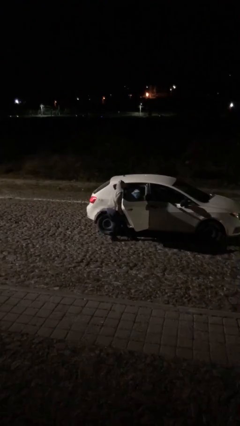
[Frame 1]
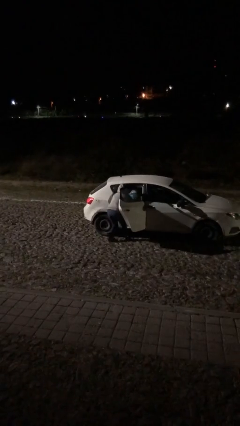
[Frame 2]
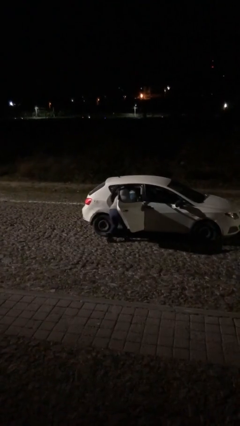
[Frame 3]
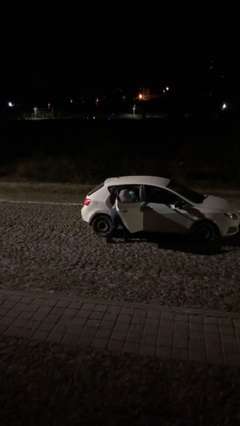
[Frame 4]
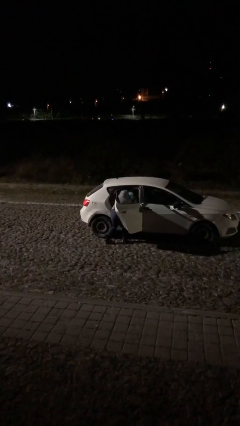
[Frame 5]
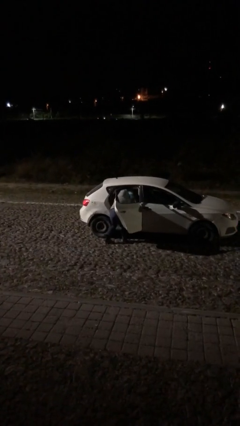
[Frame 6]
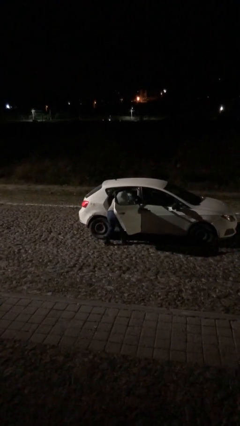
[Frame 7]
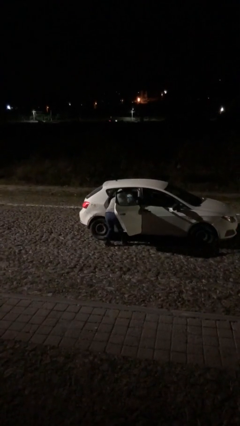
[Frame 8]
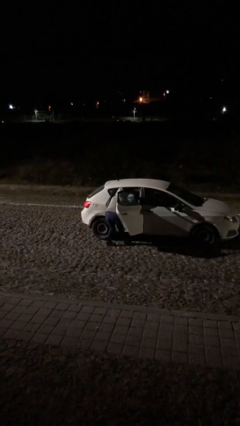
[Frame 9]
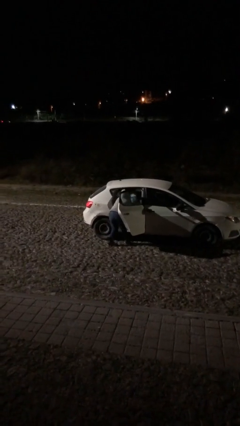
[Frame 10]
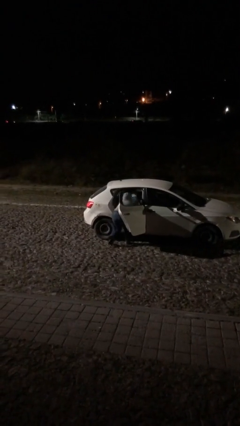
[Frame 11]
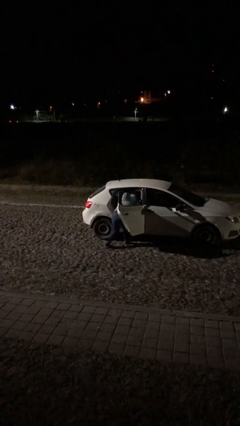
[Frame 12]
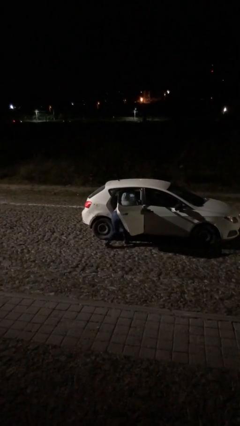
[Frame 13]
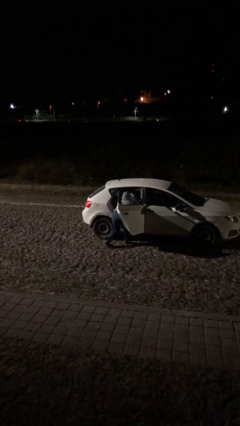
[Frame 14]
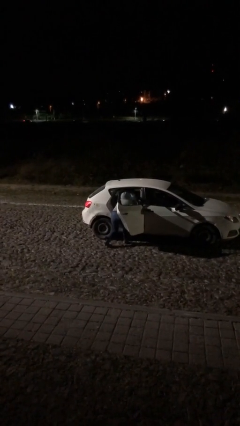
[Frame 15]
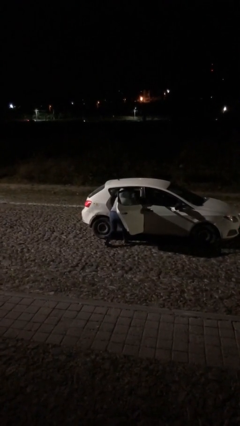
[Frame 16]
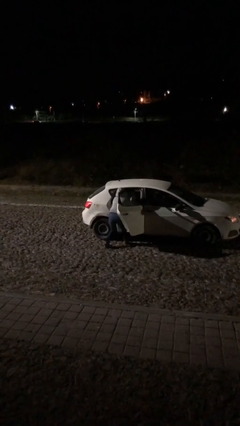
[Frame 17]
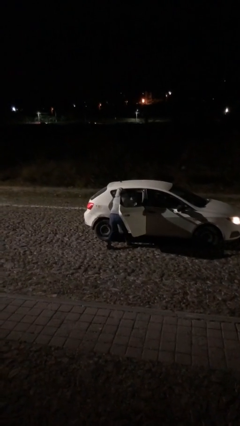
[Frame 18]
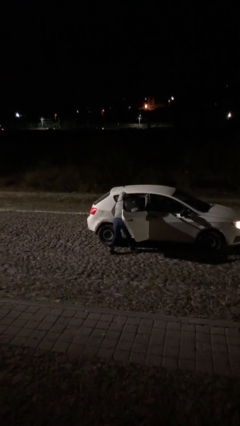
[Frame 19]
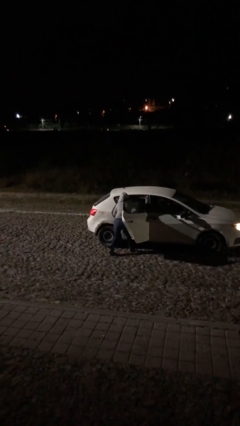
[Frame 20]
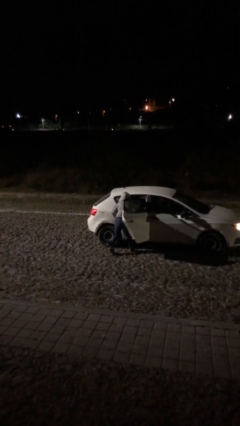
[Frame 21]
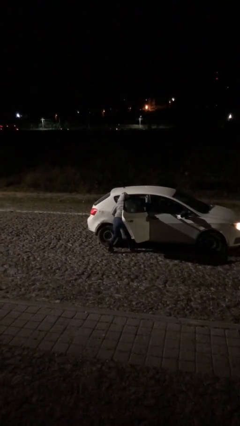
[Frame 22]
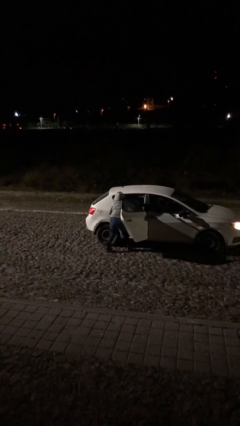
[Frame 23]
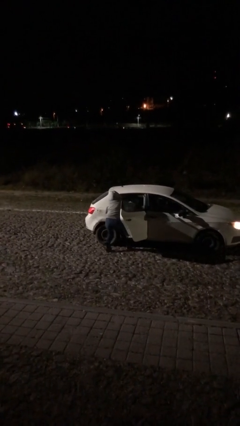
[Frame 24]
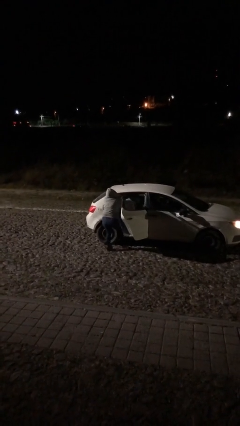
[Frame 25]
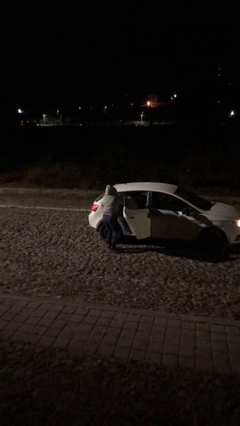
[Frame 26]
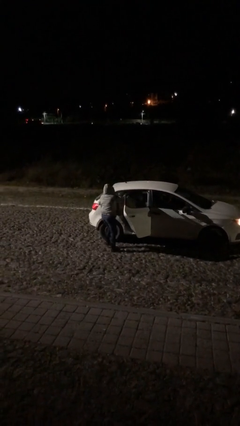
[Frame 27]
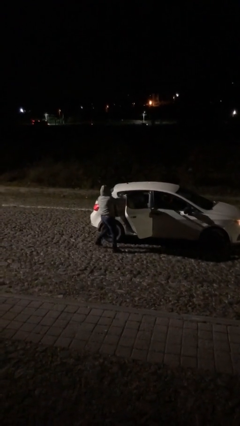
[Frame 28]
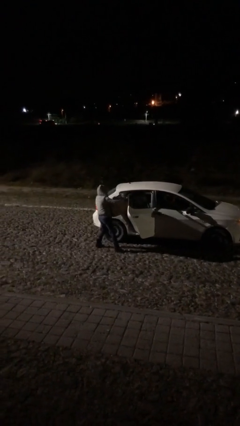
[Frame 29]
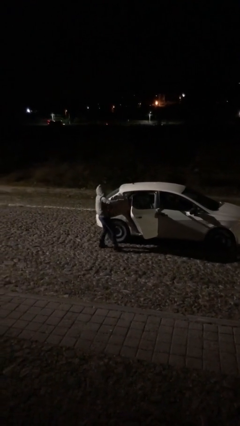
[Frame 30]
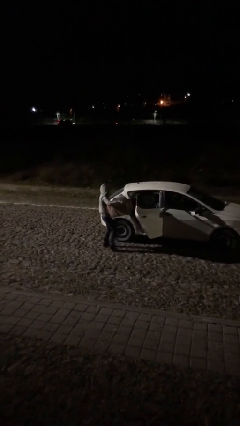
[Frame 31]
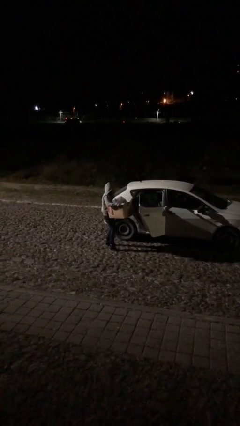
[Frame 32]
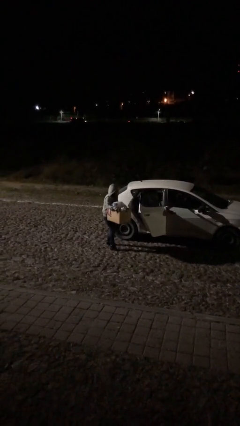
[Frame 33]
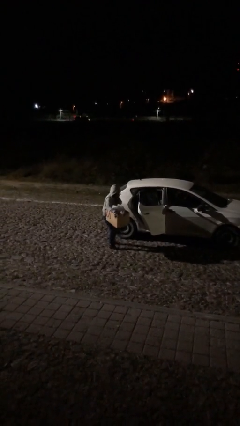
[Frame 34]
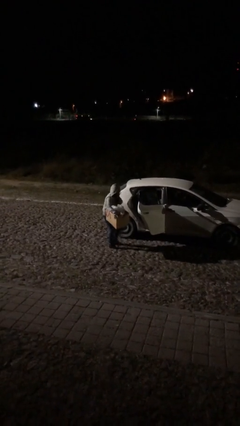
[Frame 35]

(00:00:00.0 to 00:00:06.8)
person unloads car

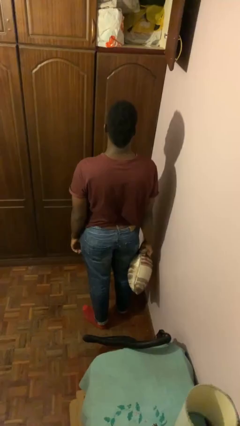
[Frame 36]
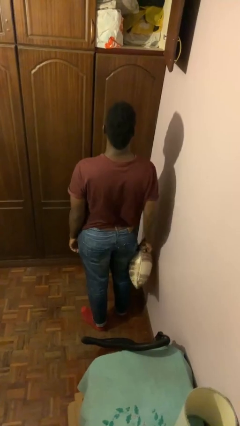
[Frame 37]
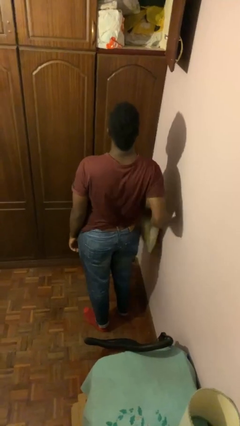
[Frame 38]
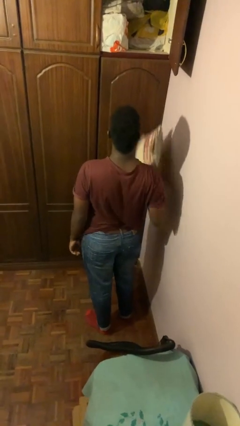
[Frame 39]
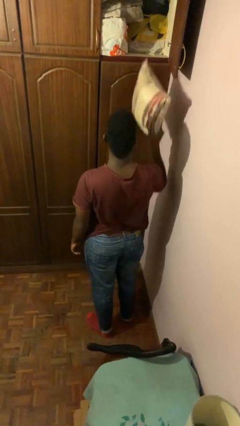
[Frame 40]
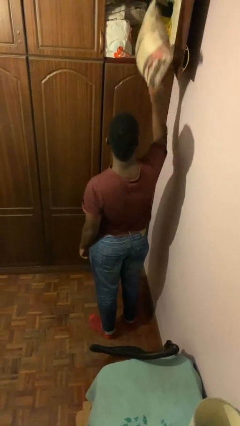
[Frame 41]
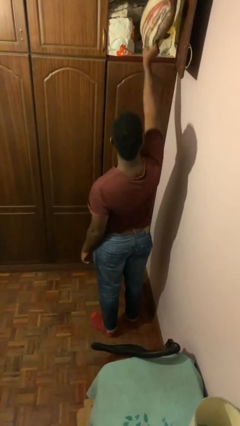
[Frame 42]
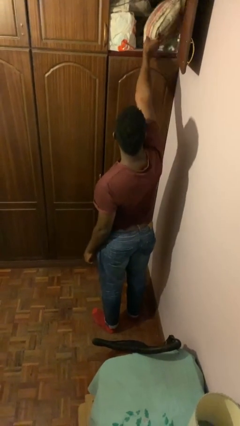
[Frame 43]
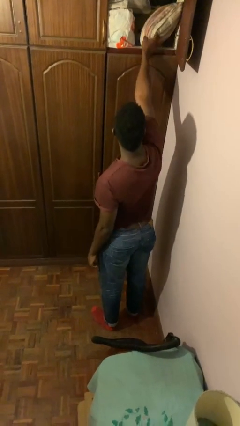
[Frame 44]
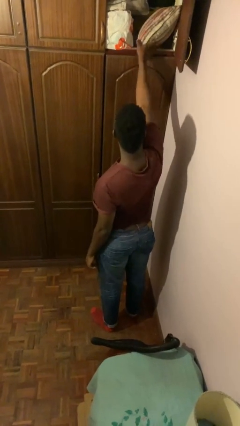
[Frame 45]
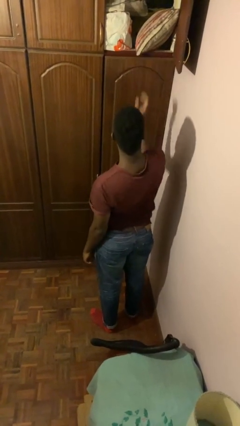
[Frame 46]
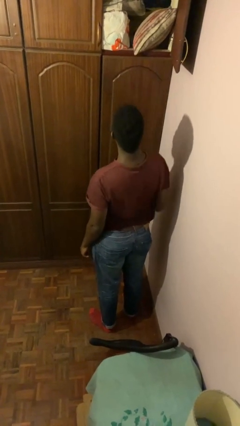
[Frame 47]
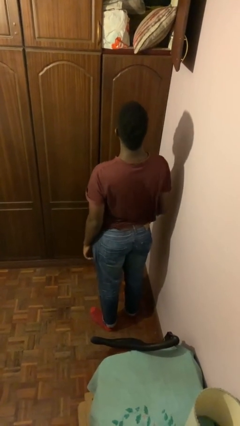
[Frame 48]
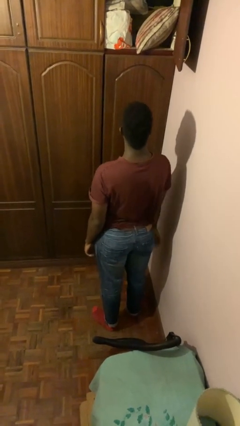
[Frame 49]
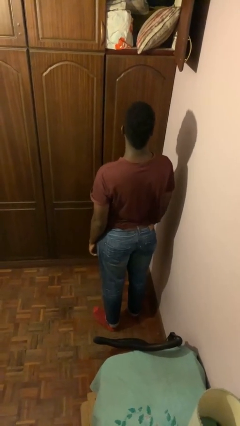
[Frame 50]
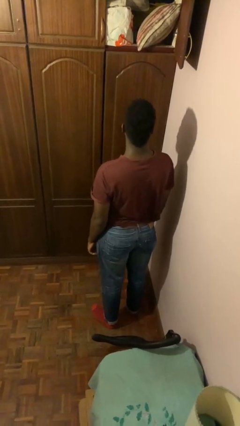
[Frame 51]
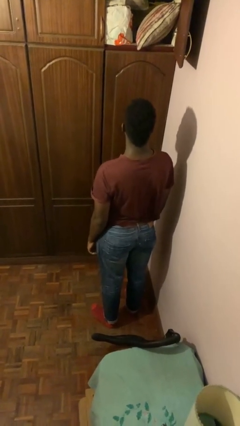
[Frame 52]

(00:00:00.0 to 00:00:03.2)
person puts down object on shelf

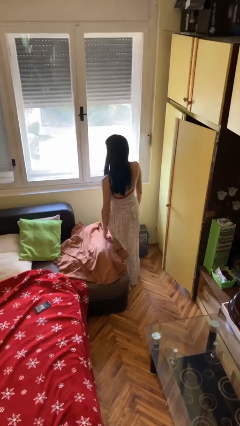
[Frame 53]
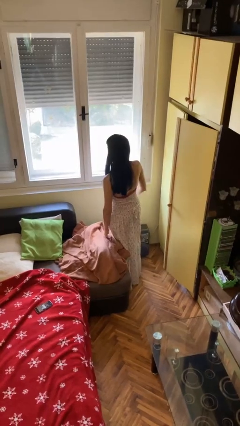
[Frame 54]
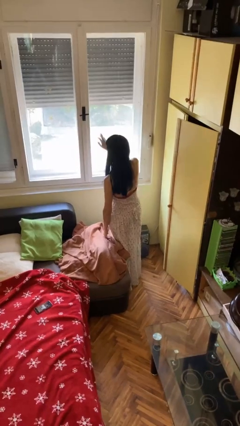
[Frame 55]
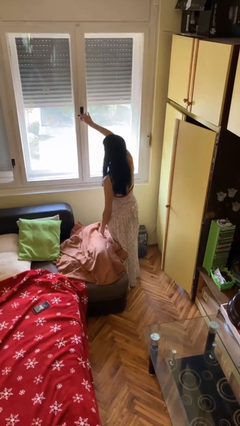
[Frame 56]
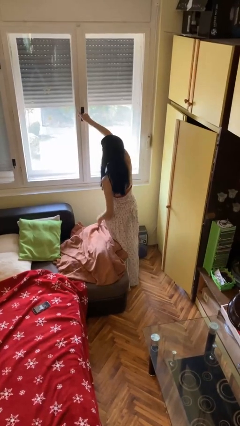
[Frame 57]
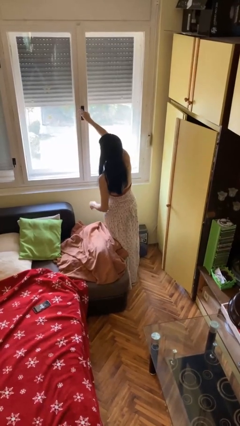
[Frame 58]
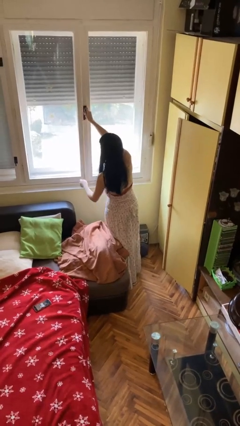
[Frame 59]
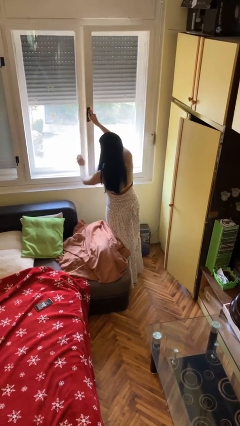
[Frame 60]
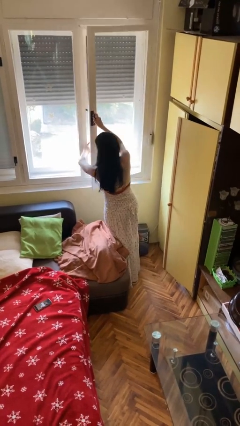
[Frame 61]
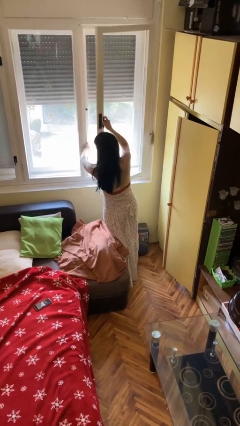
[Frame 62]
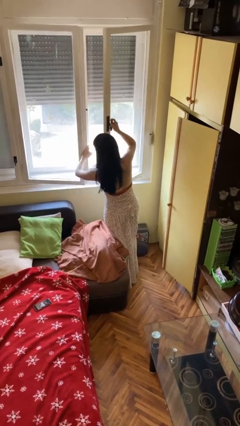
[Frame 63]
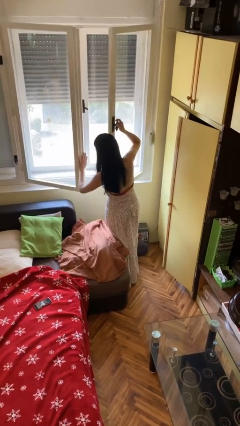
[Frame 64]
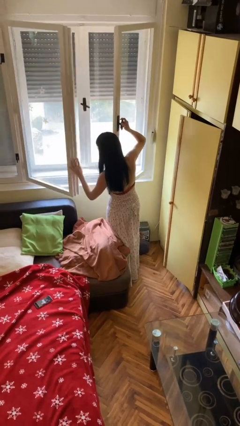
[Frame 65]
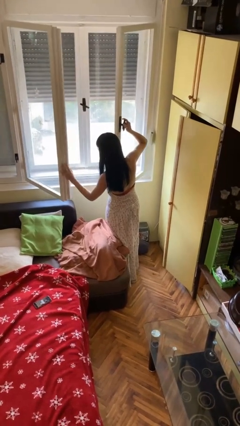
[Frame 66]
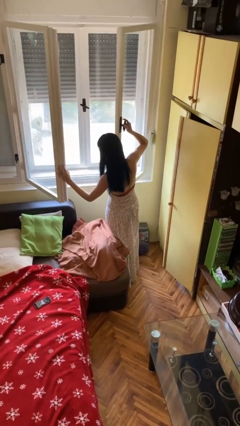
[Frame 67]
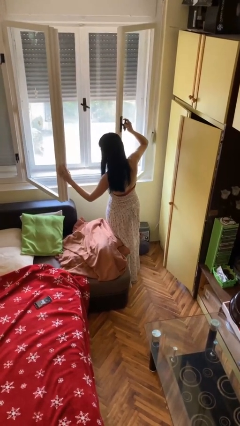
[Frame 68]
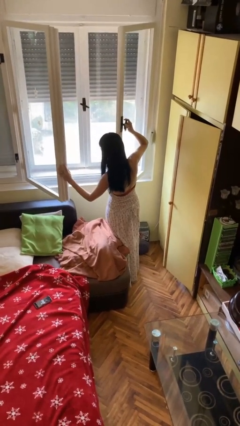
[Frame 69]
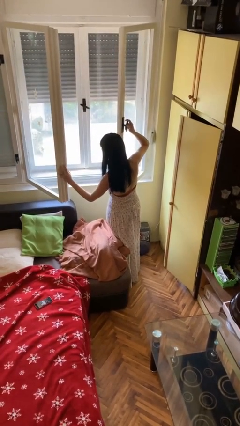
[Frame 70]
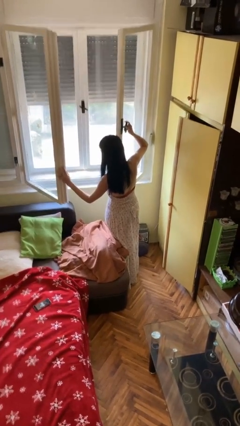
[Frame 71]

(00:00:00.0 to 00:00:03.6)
person opens microwave

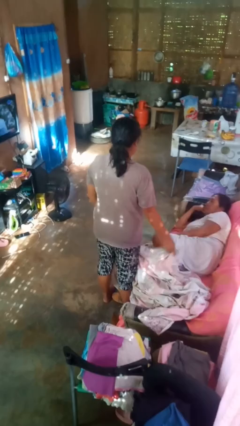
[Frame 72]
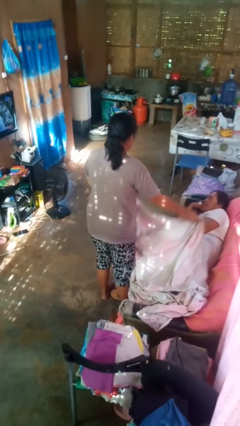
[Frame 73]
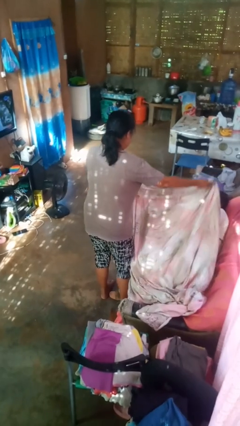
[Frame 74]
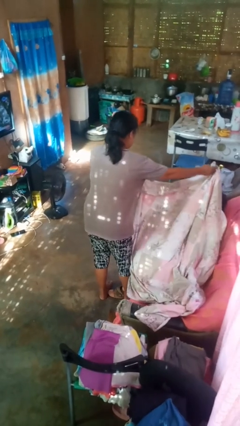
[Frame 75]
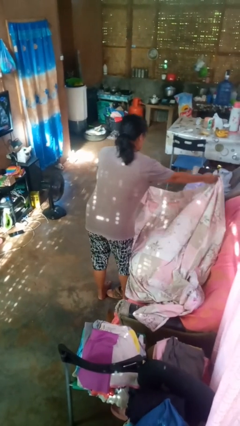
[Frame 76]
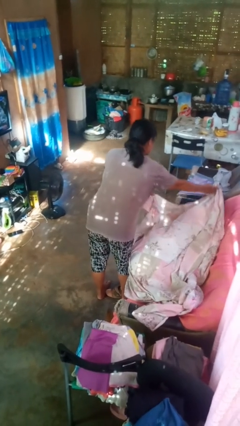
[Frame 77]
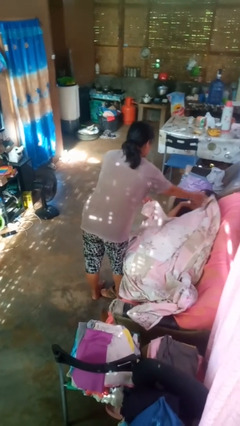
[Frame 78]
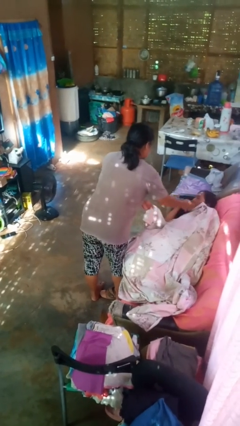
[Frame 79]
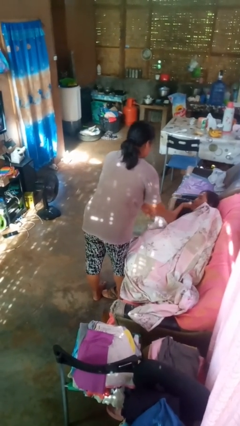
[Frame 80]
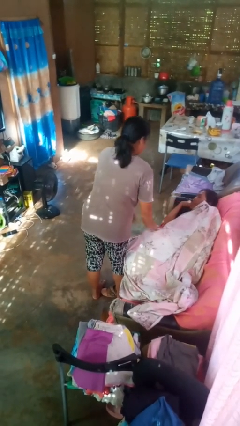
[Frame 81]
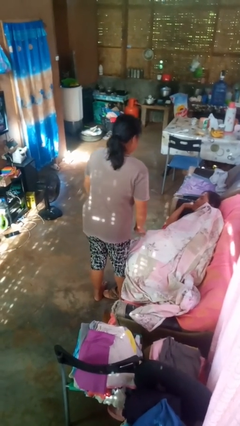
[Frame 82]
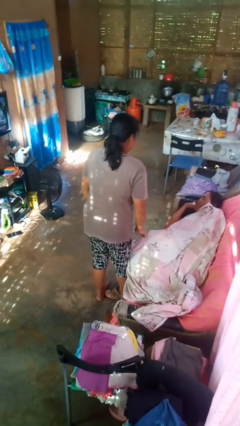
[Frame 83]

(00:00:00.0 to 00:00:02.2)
person covers friend with blanket

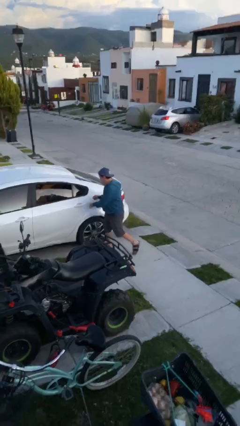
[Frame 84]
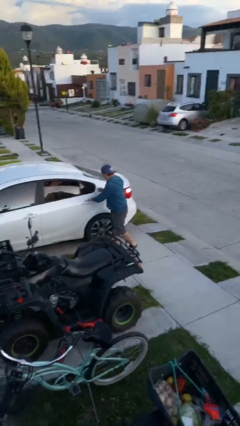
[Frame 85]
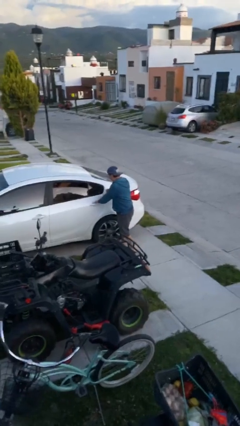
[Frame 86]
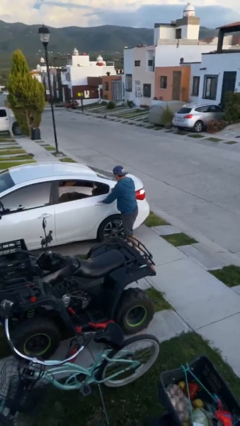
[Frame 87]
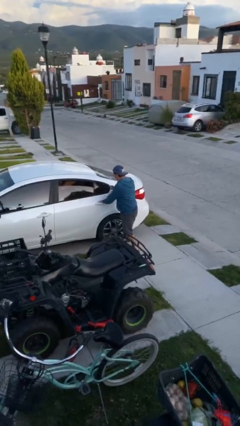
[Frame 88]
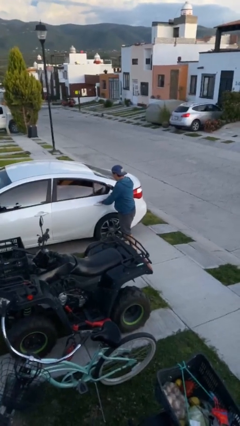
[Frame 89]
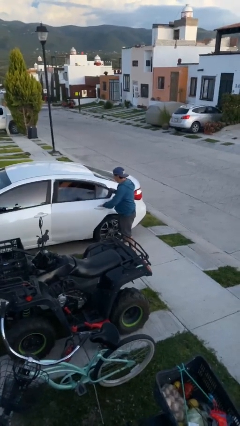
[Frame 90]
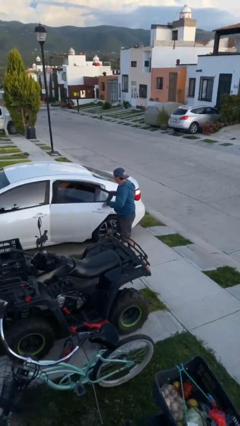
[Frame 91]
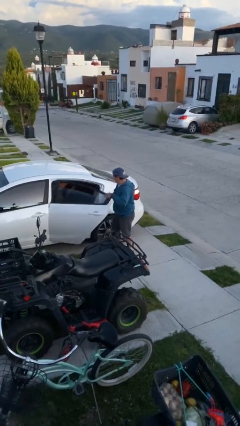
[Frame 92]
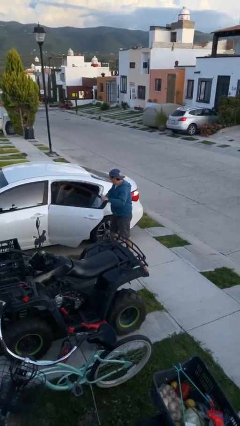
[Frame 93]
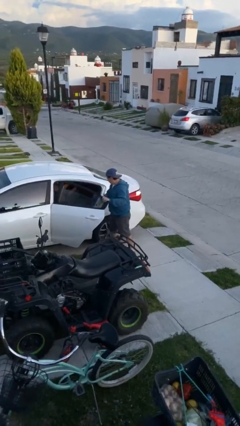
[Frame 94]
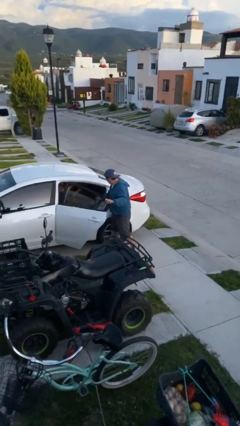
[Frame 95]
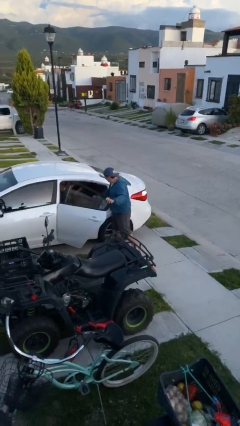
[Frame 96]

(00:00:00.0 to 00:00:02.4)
person opens car door
